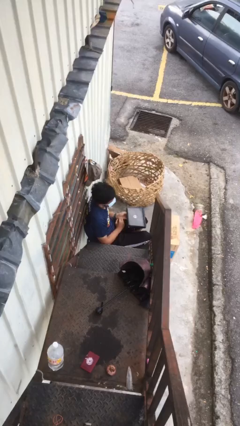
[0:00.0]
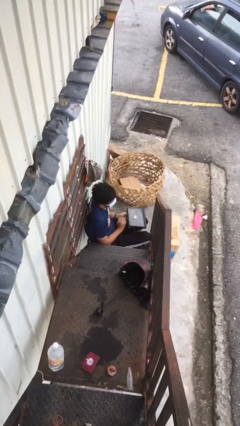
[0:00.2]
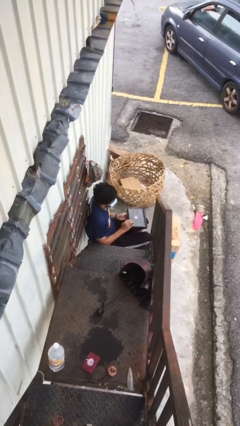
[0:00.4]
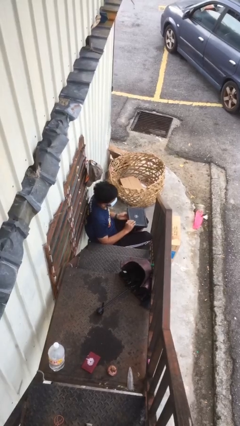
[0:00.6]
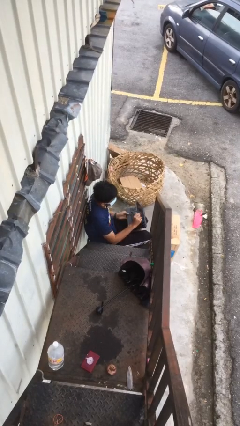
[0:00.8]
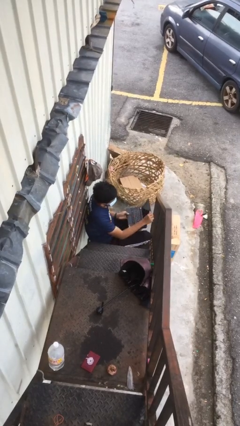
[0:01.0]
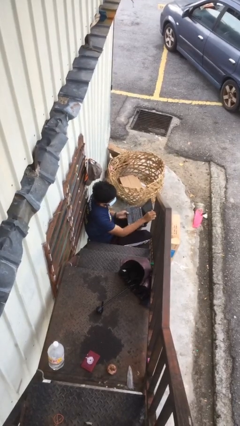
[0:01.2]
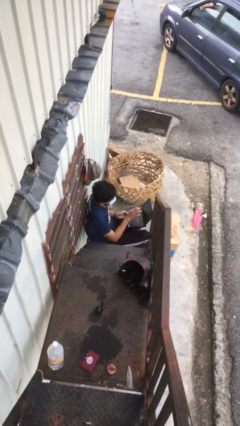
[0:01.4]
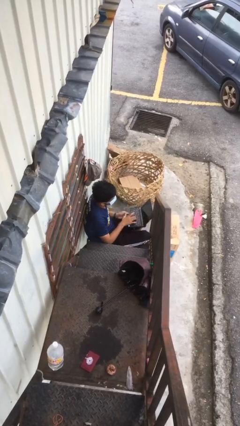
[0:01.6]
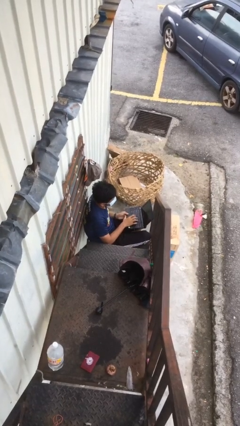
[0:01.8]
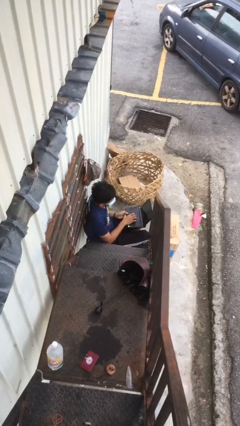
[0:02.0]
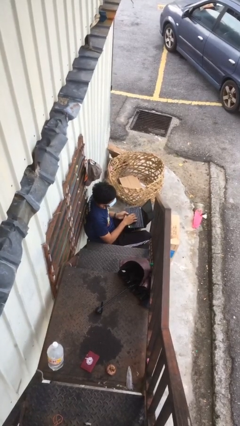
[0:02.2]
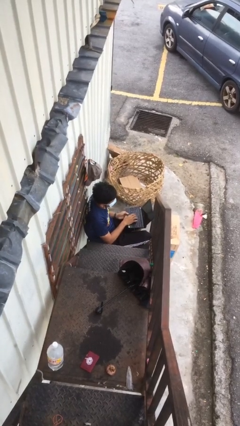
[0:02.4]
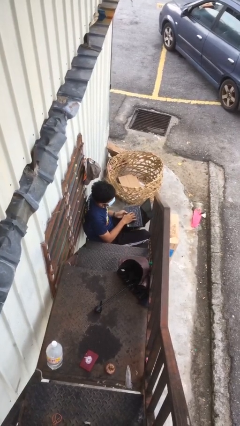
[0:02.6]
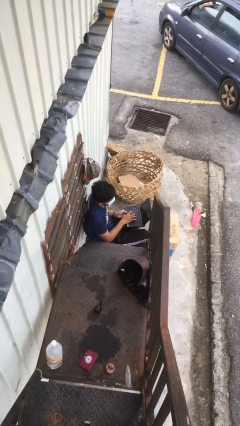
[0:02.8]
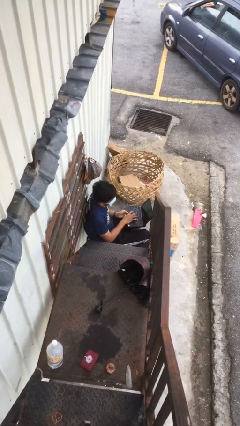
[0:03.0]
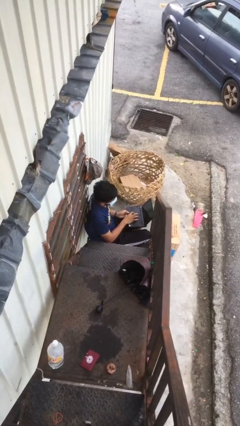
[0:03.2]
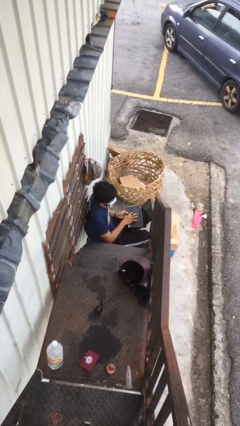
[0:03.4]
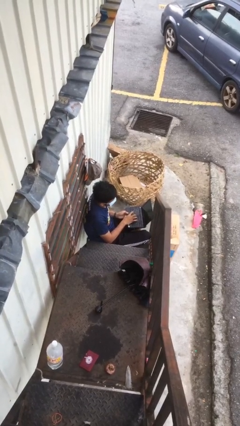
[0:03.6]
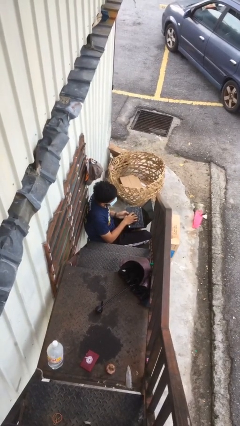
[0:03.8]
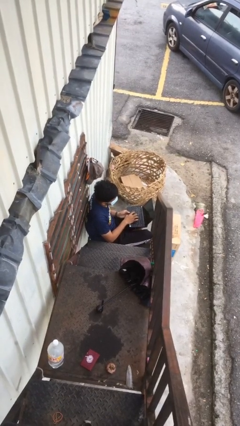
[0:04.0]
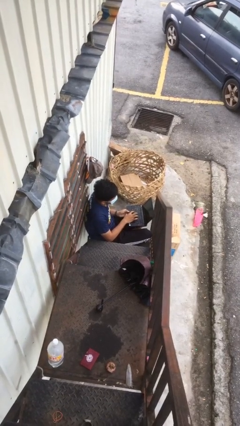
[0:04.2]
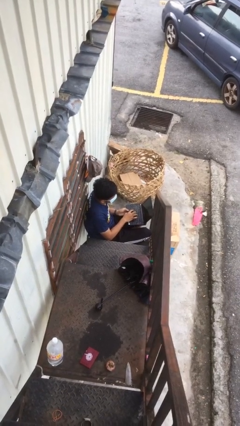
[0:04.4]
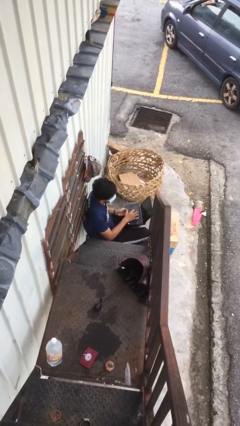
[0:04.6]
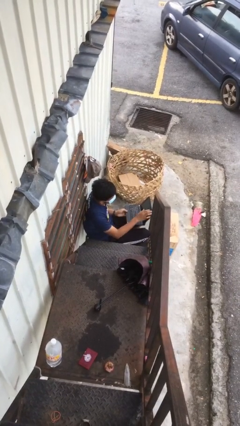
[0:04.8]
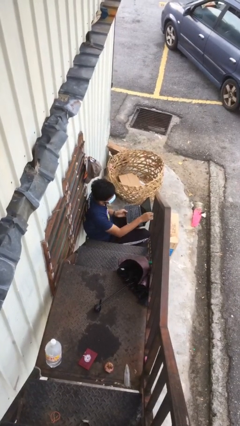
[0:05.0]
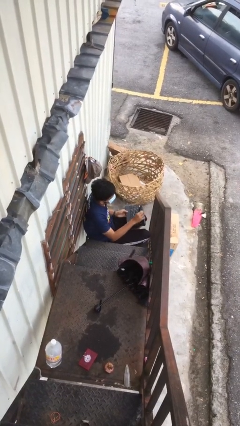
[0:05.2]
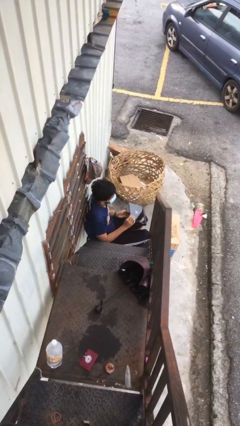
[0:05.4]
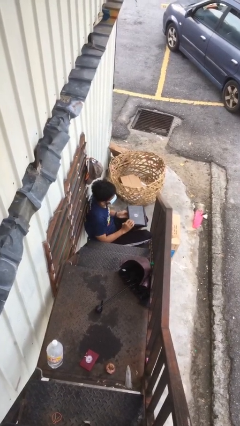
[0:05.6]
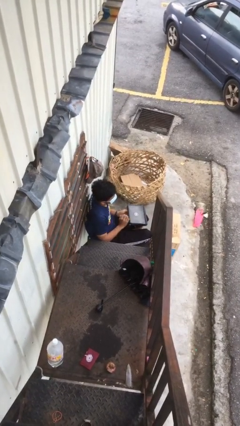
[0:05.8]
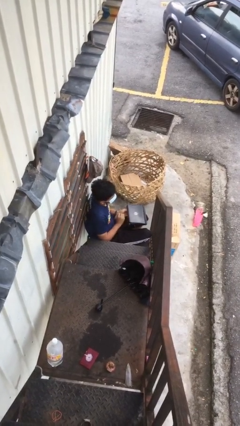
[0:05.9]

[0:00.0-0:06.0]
person interacts with laptop

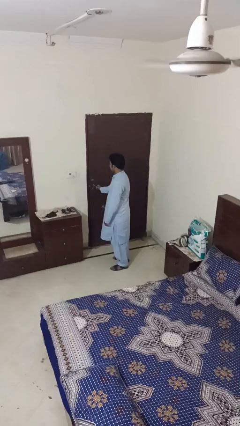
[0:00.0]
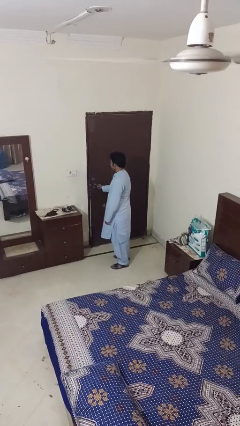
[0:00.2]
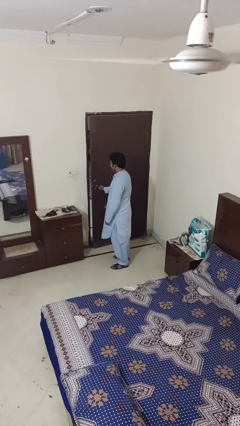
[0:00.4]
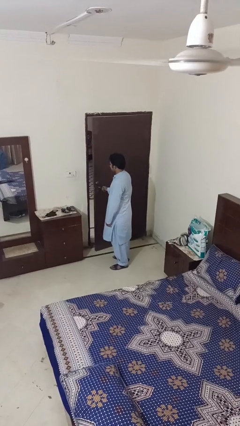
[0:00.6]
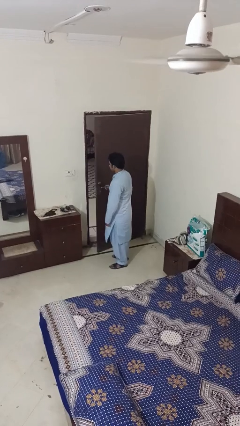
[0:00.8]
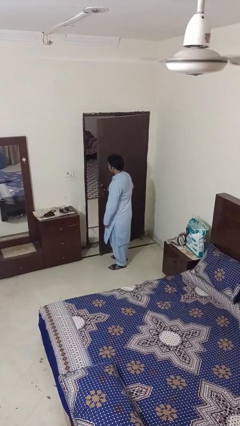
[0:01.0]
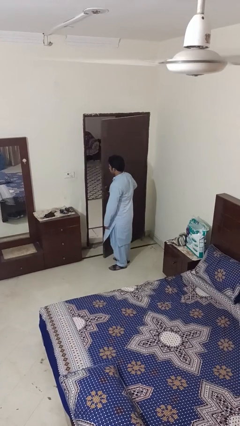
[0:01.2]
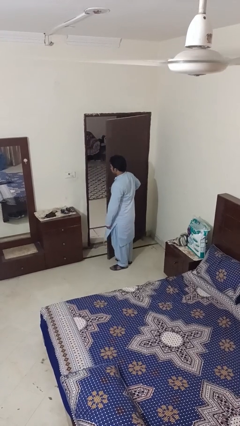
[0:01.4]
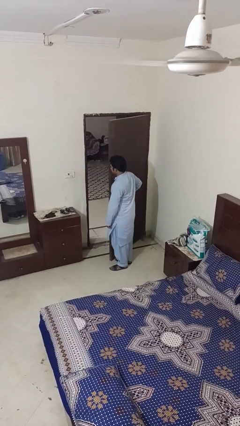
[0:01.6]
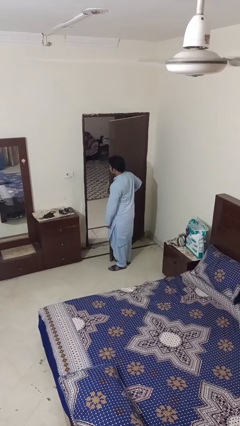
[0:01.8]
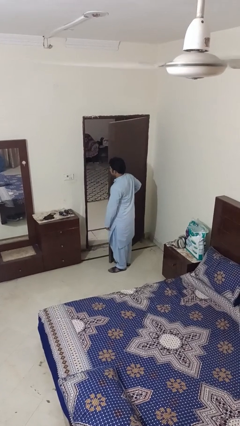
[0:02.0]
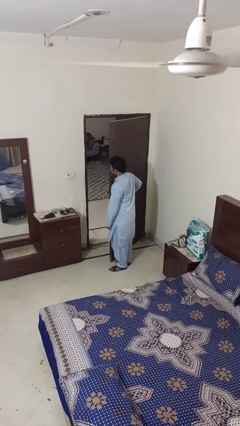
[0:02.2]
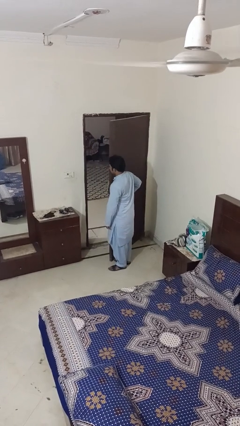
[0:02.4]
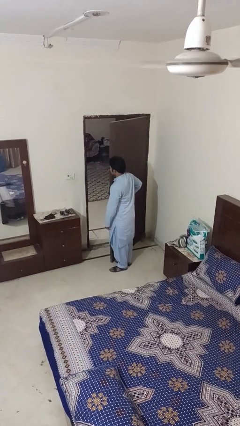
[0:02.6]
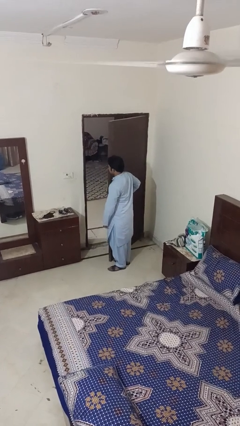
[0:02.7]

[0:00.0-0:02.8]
person opens facility door

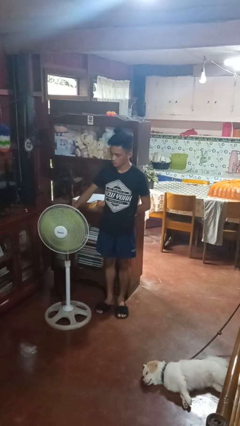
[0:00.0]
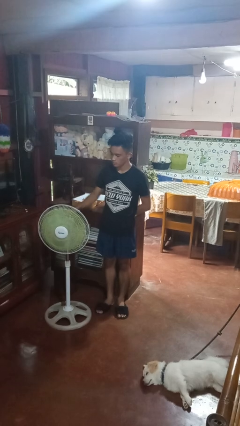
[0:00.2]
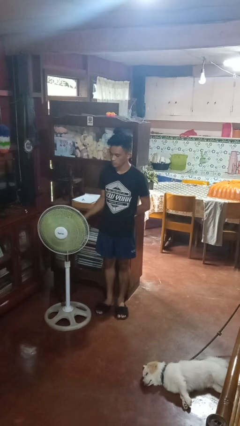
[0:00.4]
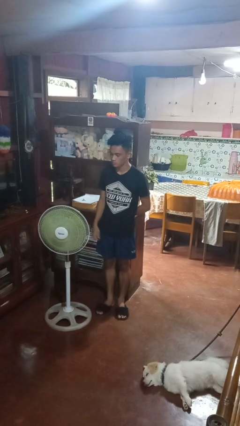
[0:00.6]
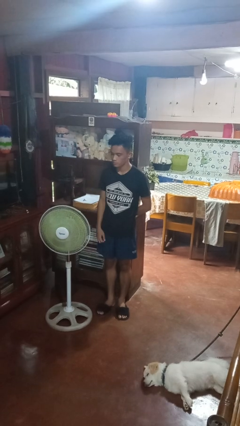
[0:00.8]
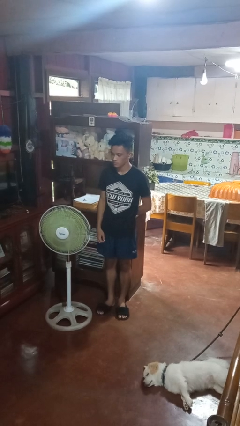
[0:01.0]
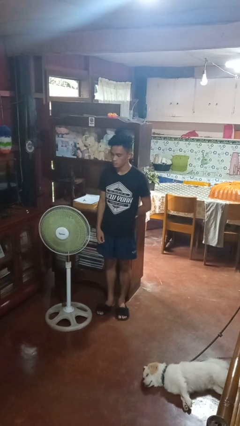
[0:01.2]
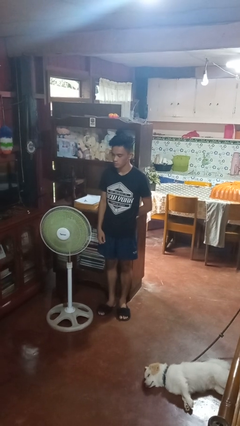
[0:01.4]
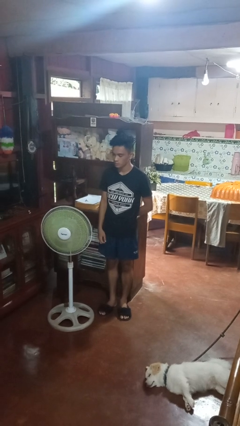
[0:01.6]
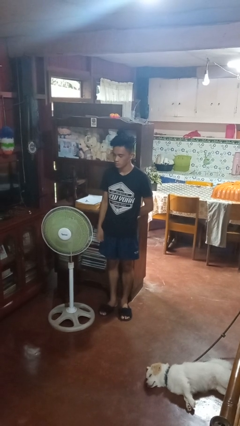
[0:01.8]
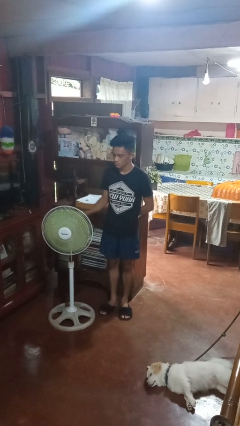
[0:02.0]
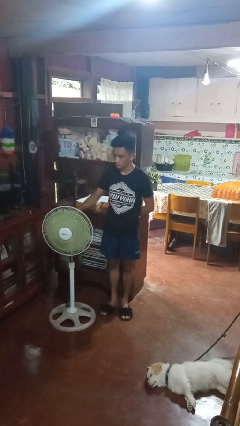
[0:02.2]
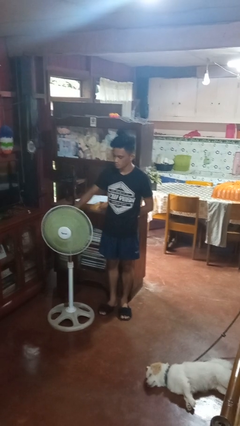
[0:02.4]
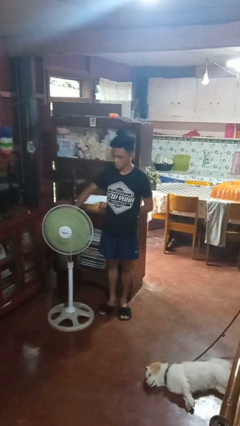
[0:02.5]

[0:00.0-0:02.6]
person turns on fan

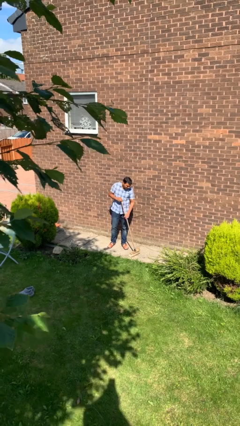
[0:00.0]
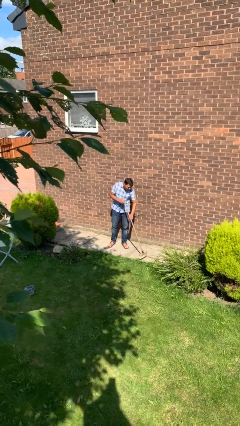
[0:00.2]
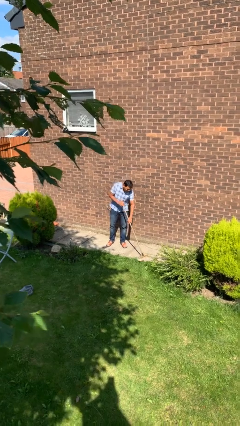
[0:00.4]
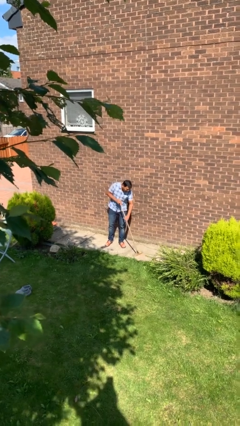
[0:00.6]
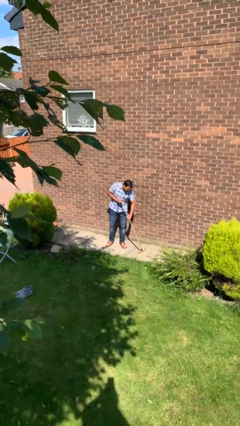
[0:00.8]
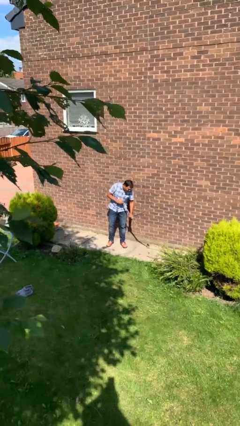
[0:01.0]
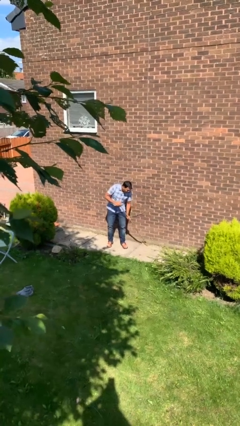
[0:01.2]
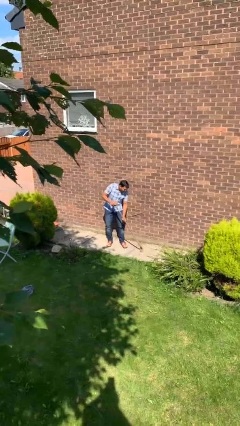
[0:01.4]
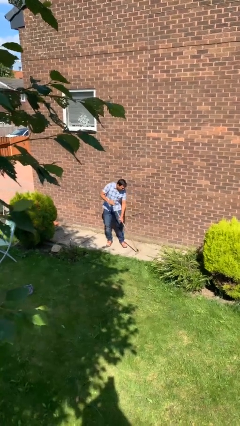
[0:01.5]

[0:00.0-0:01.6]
person sweeps floor

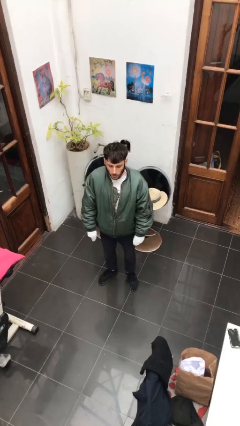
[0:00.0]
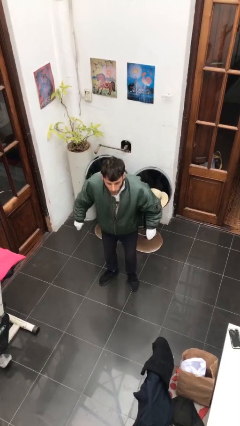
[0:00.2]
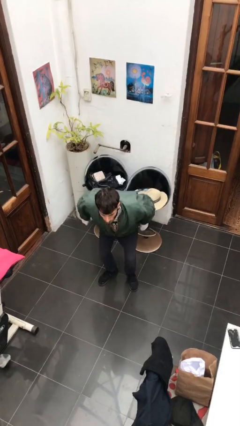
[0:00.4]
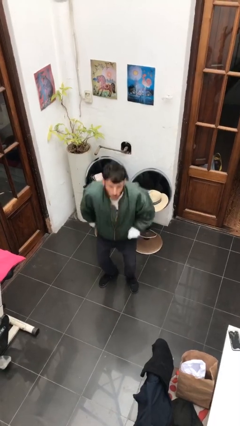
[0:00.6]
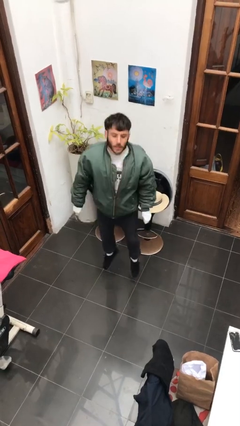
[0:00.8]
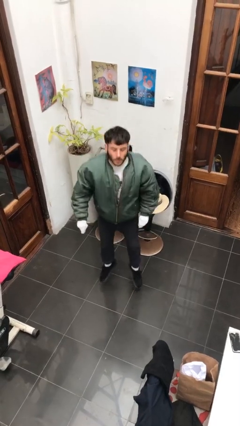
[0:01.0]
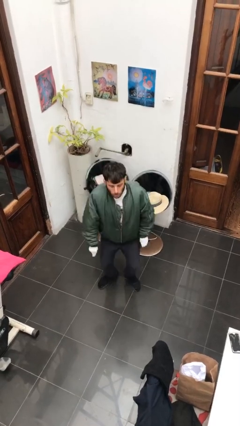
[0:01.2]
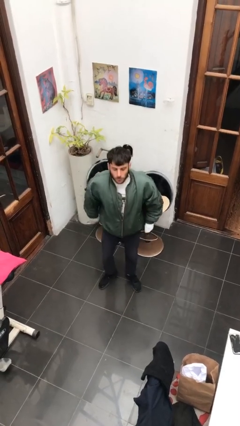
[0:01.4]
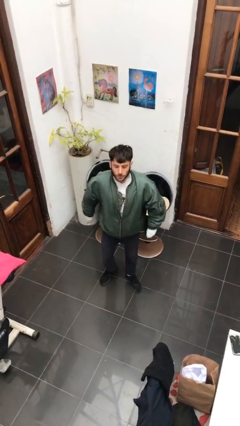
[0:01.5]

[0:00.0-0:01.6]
person jumps

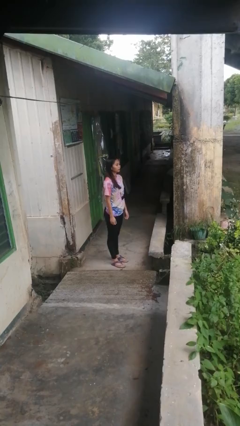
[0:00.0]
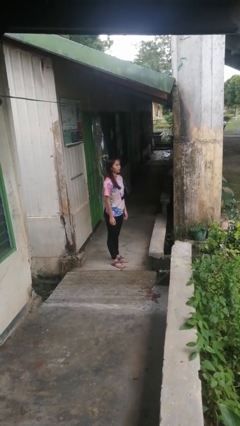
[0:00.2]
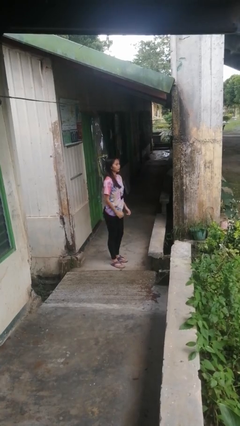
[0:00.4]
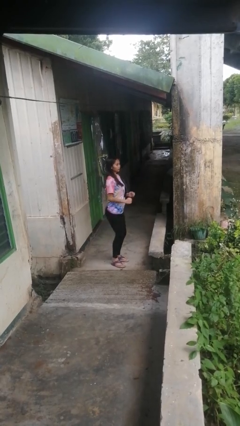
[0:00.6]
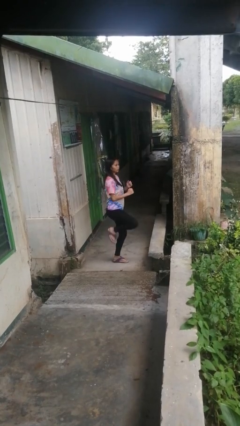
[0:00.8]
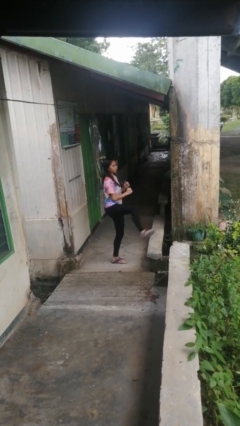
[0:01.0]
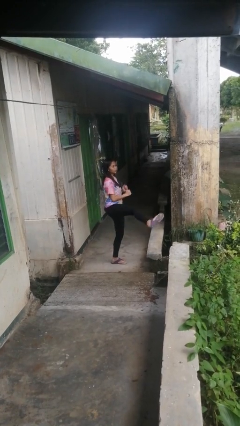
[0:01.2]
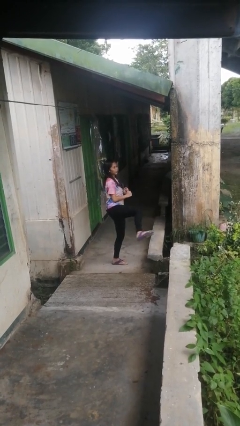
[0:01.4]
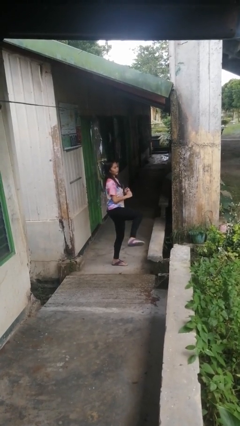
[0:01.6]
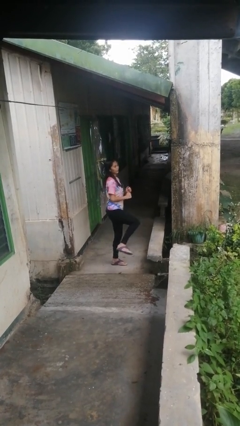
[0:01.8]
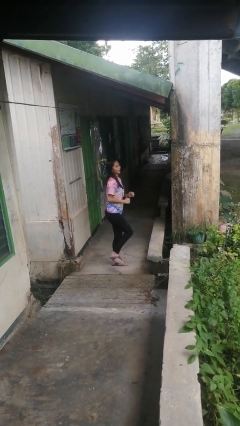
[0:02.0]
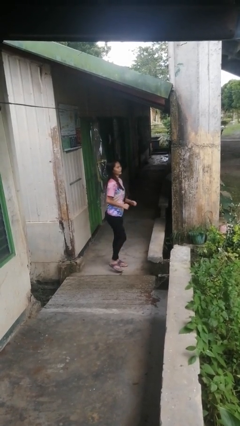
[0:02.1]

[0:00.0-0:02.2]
person karate kicks

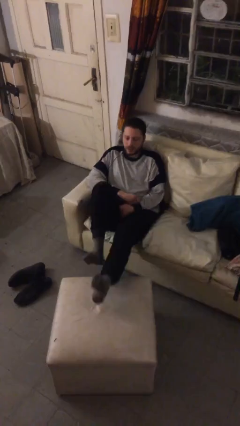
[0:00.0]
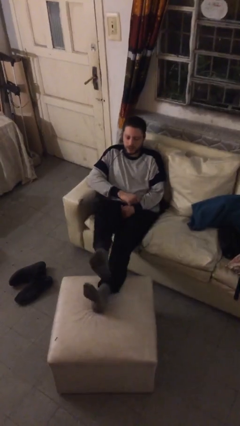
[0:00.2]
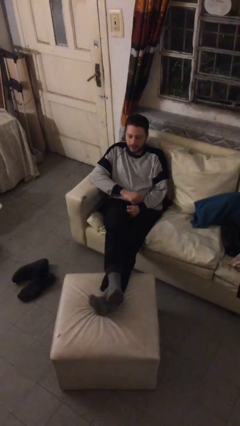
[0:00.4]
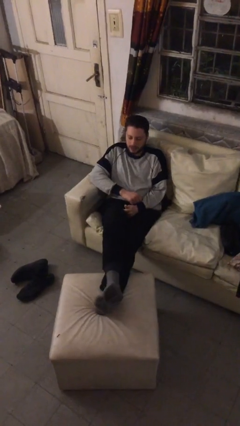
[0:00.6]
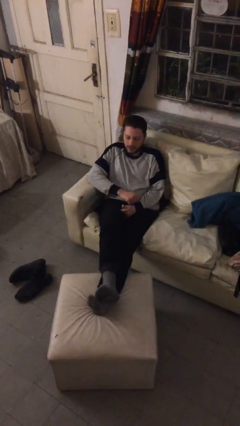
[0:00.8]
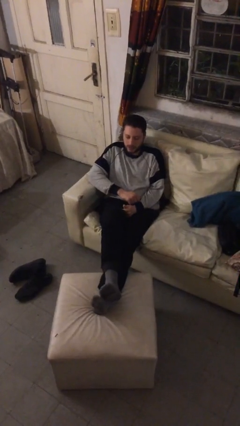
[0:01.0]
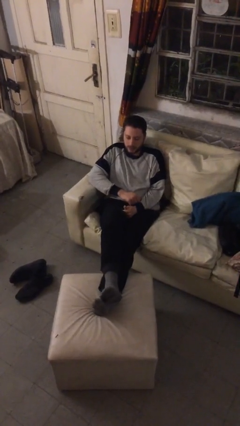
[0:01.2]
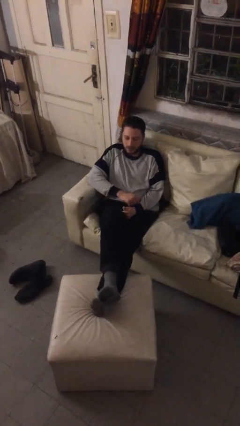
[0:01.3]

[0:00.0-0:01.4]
person puts feet up
